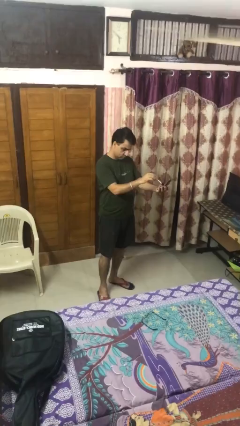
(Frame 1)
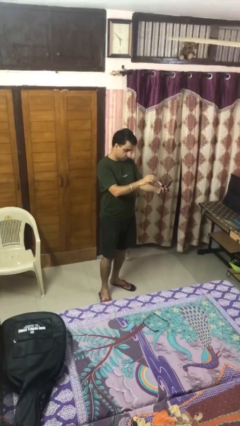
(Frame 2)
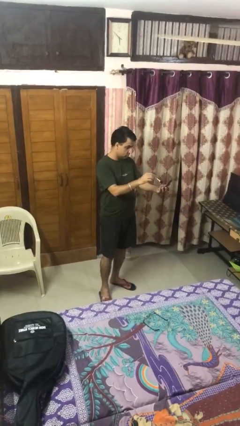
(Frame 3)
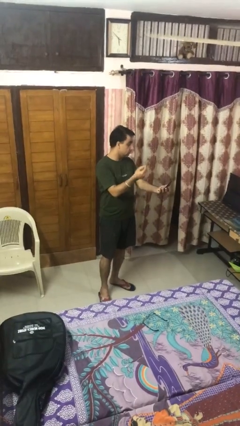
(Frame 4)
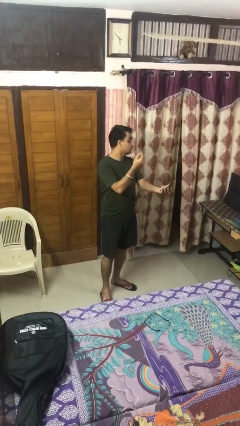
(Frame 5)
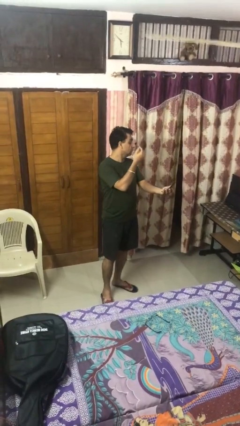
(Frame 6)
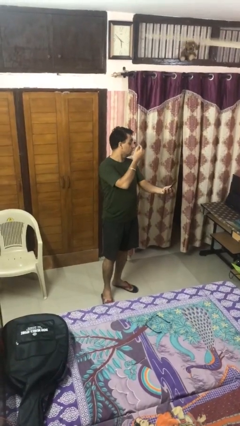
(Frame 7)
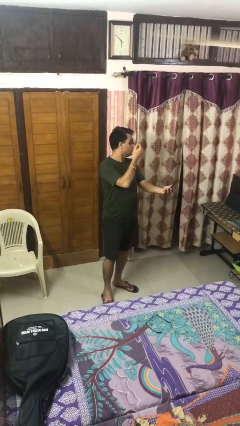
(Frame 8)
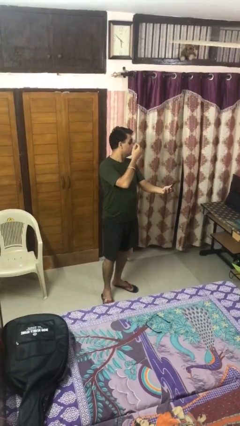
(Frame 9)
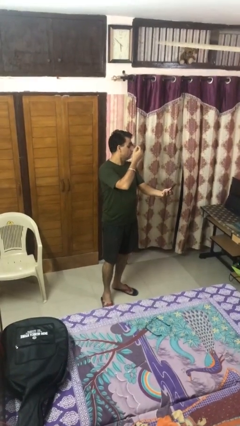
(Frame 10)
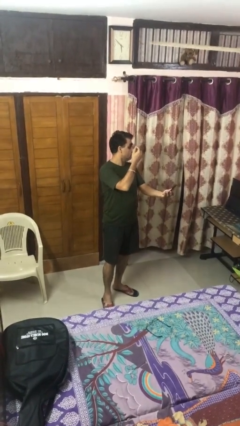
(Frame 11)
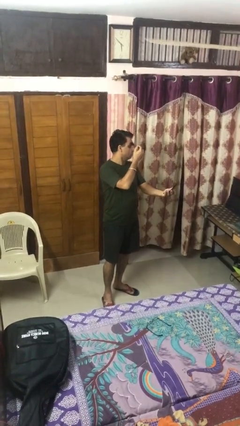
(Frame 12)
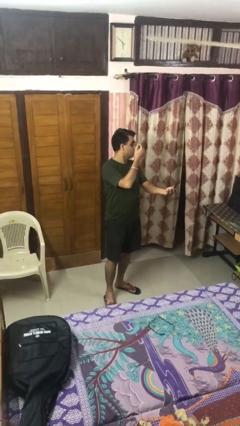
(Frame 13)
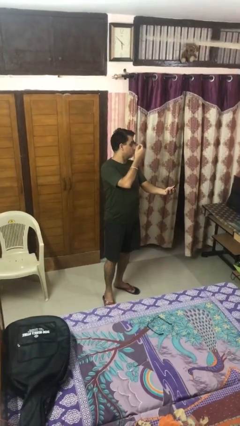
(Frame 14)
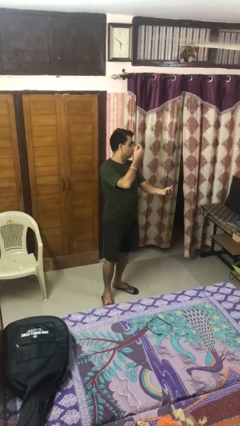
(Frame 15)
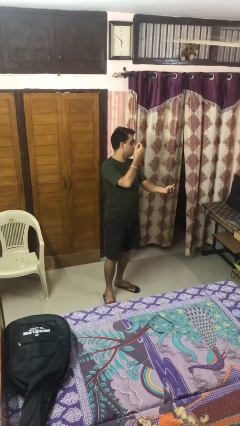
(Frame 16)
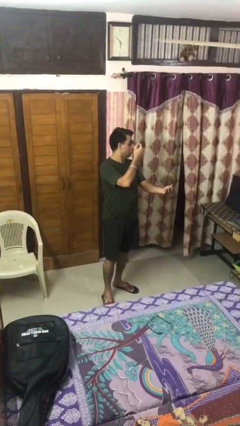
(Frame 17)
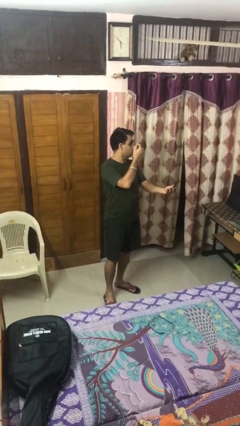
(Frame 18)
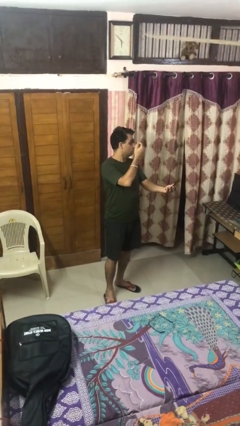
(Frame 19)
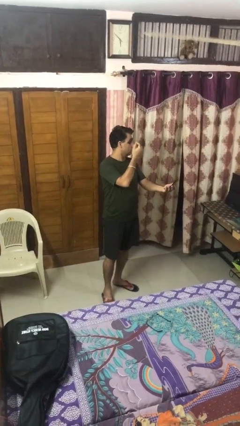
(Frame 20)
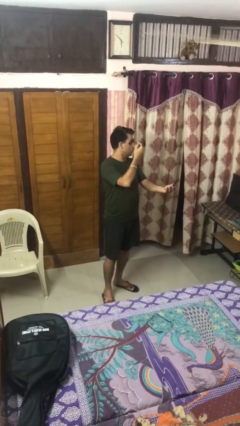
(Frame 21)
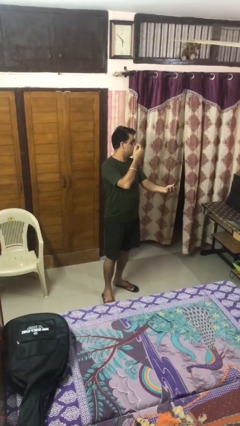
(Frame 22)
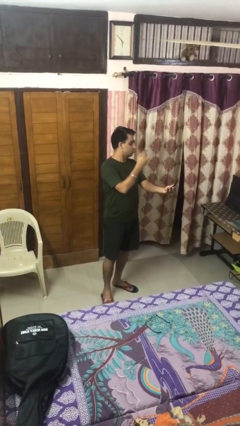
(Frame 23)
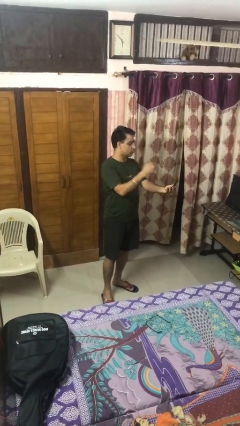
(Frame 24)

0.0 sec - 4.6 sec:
person applies eye makeup

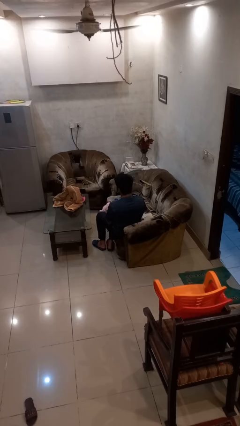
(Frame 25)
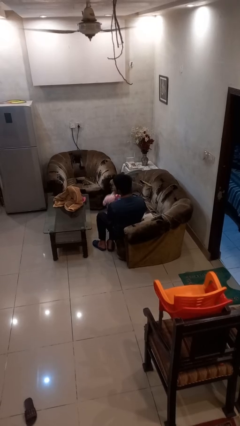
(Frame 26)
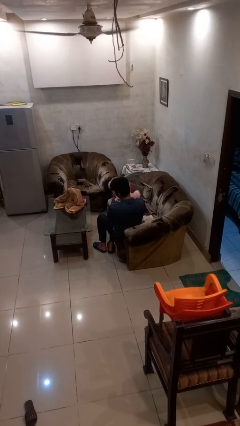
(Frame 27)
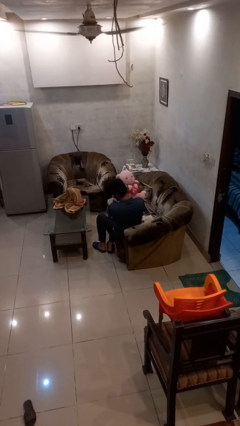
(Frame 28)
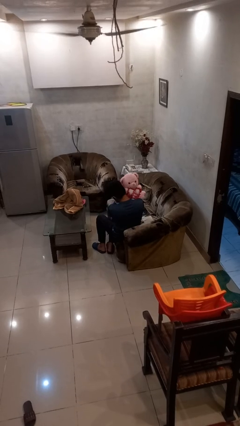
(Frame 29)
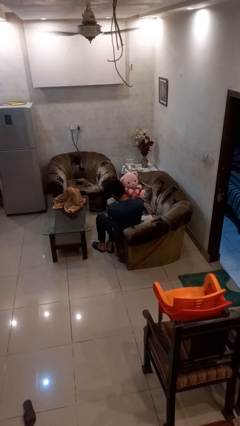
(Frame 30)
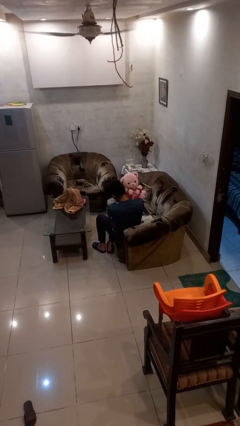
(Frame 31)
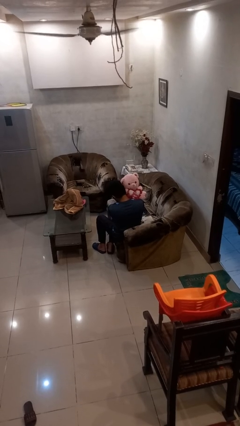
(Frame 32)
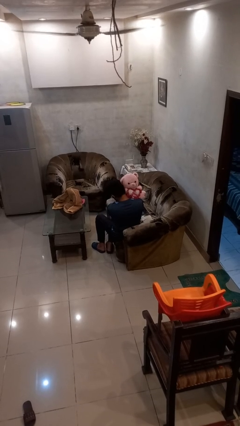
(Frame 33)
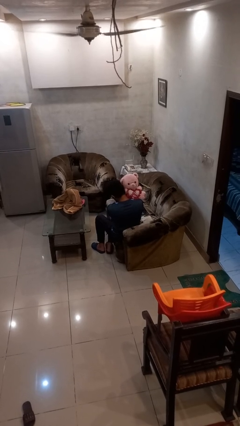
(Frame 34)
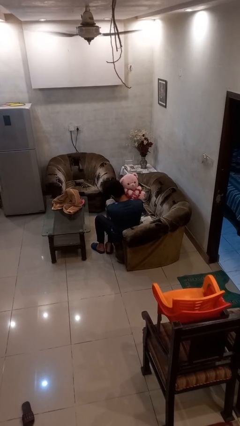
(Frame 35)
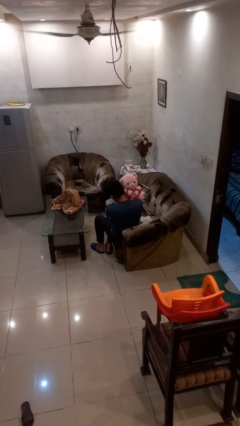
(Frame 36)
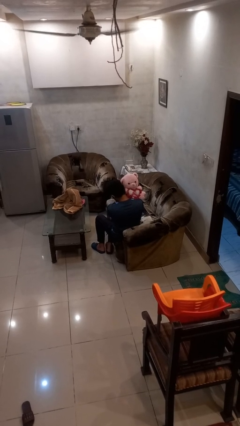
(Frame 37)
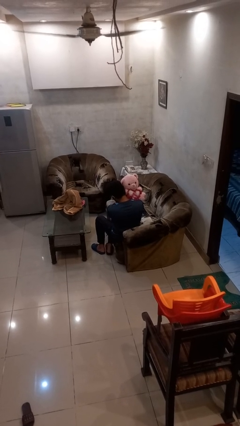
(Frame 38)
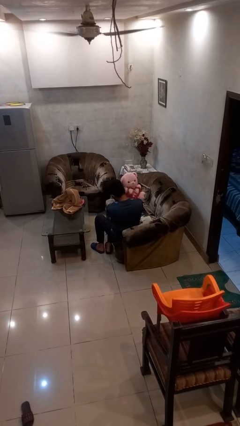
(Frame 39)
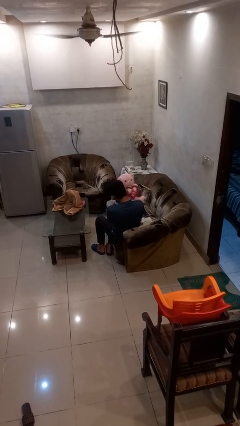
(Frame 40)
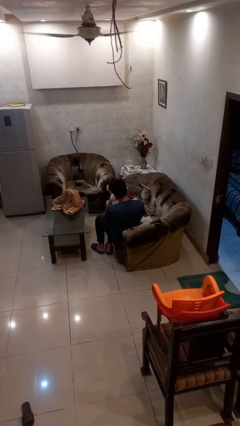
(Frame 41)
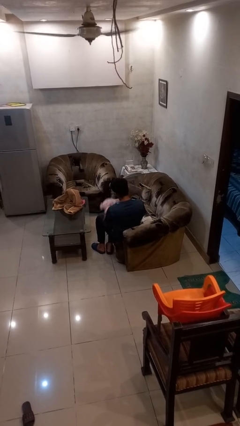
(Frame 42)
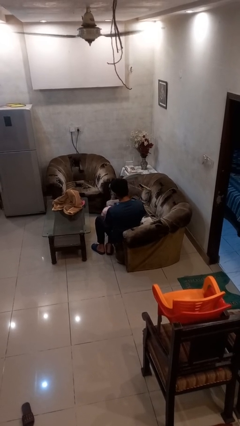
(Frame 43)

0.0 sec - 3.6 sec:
person hugs stuffed animal

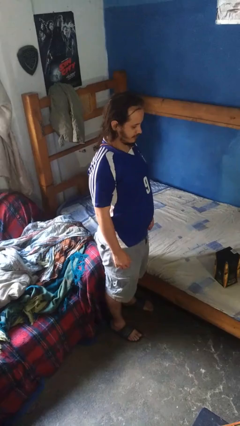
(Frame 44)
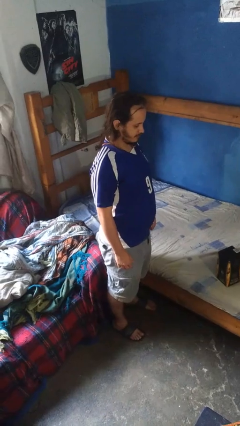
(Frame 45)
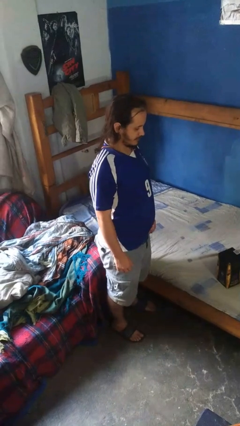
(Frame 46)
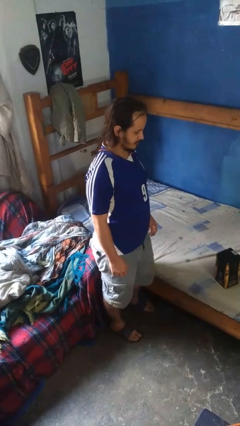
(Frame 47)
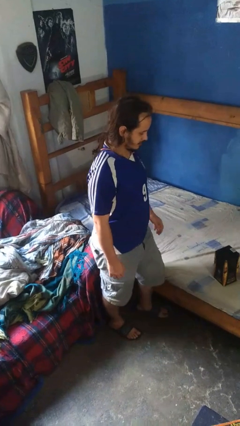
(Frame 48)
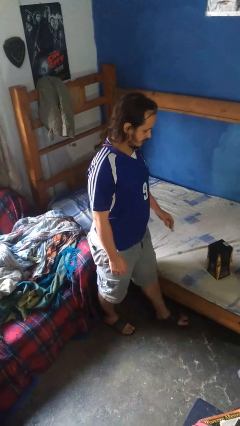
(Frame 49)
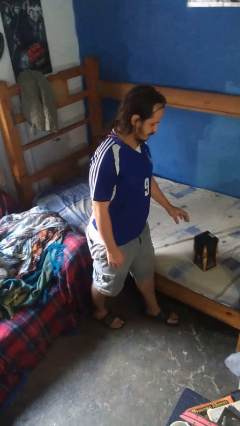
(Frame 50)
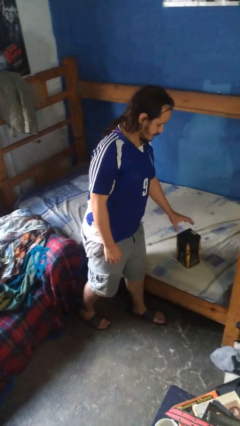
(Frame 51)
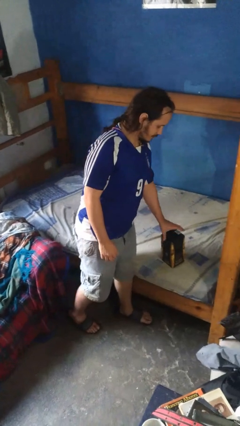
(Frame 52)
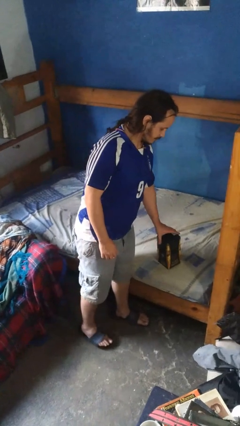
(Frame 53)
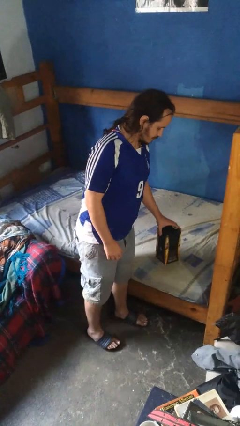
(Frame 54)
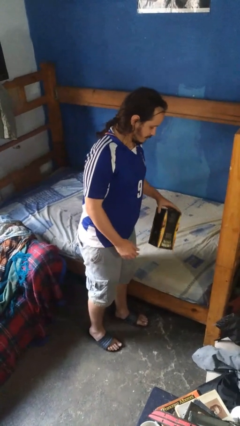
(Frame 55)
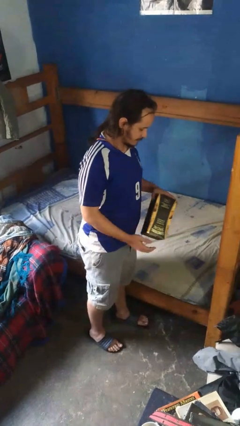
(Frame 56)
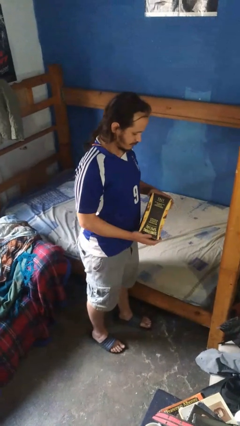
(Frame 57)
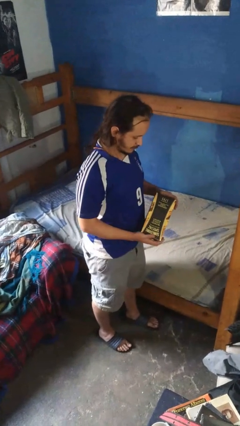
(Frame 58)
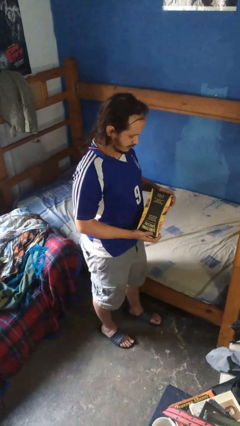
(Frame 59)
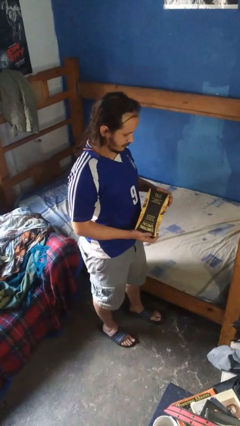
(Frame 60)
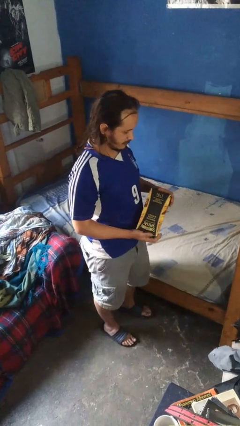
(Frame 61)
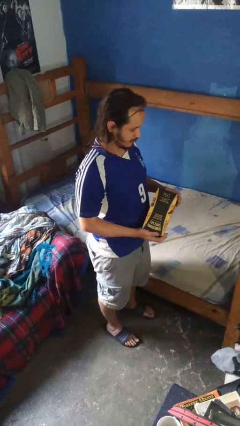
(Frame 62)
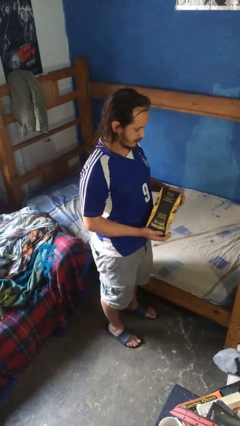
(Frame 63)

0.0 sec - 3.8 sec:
person picks up object from bed

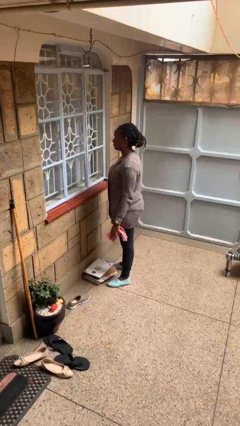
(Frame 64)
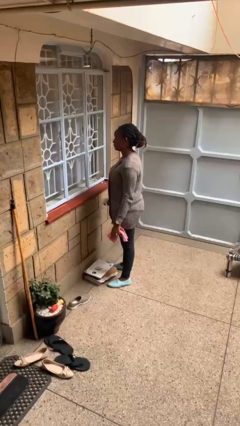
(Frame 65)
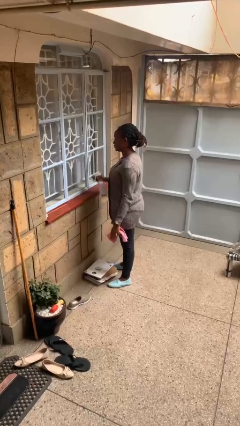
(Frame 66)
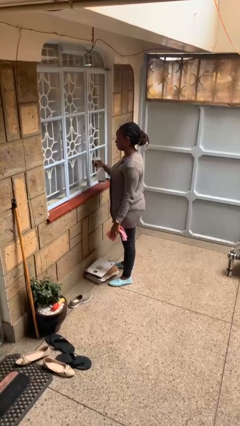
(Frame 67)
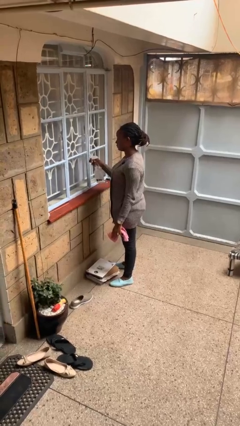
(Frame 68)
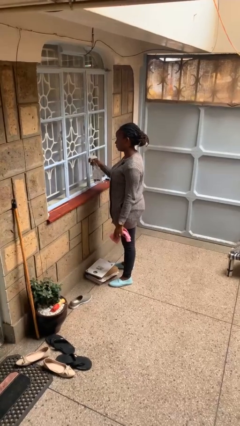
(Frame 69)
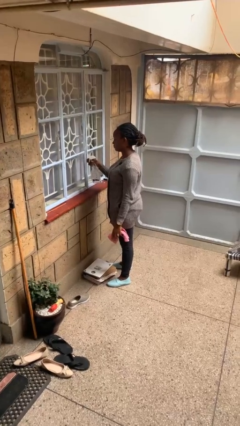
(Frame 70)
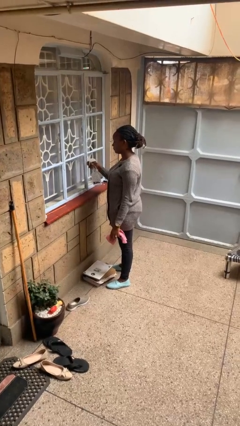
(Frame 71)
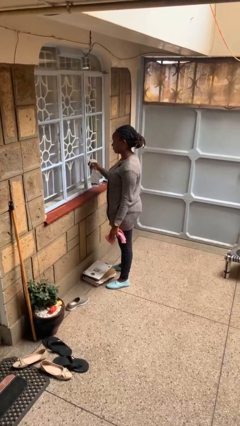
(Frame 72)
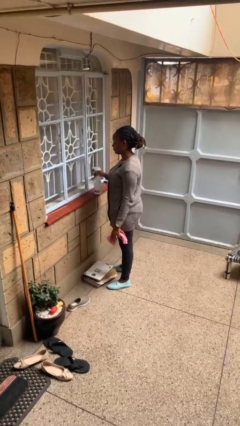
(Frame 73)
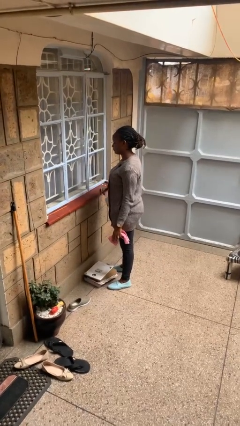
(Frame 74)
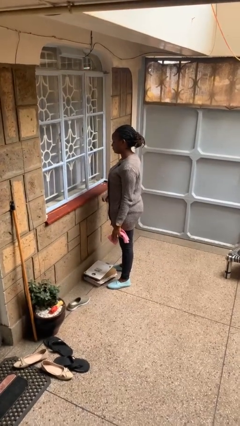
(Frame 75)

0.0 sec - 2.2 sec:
person sprays from bottle

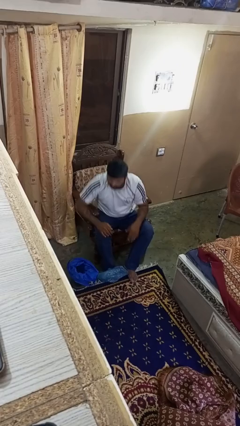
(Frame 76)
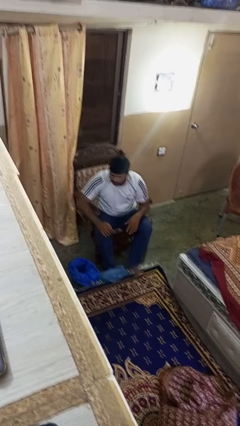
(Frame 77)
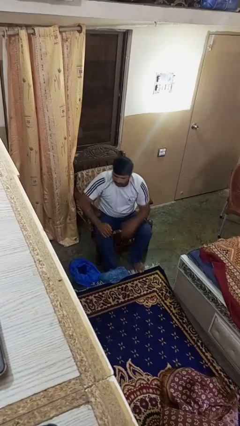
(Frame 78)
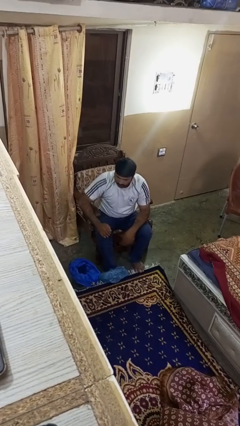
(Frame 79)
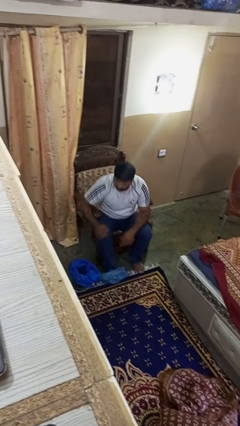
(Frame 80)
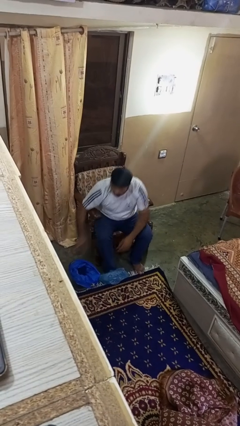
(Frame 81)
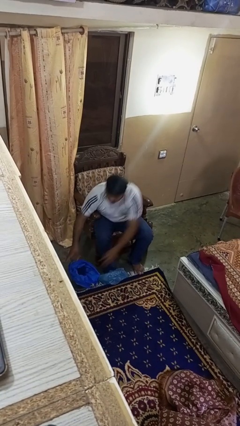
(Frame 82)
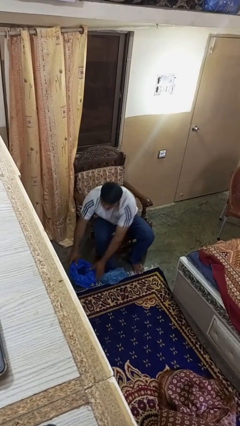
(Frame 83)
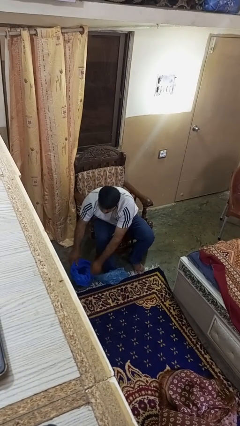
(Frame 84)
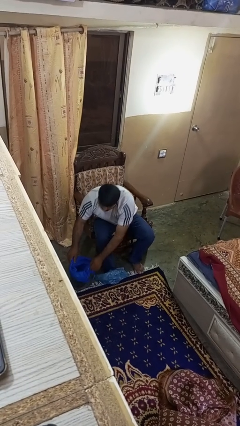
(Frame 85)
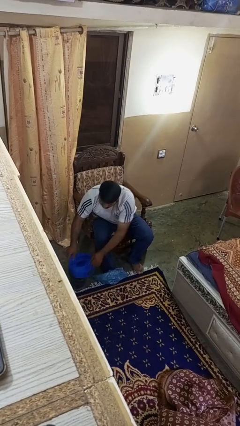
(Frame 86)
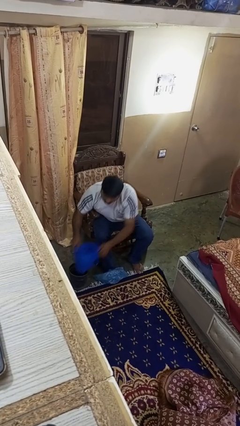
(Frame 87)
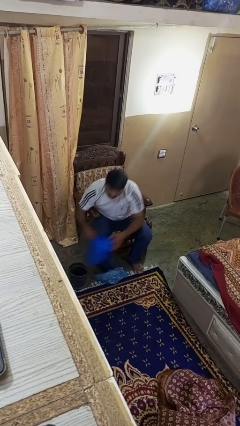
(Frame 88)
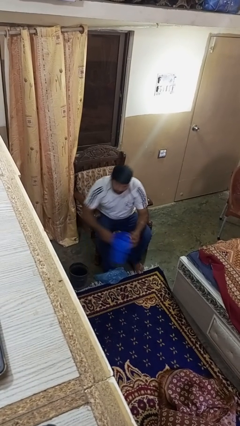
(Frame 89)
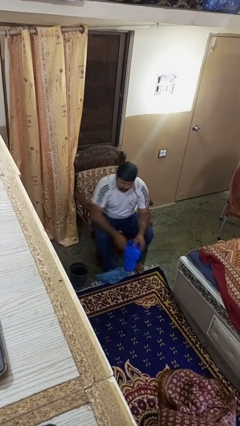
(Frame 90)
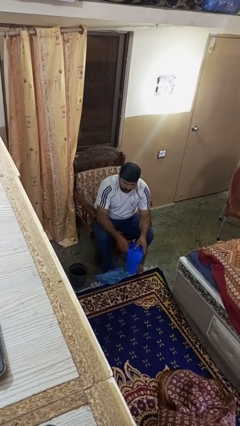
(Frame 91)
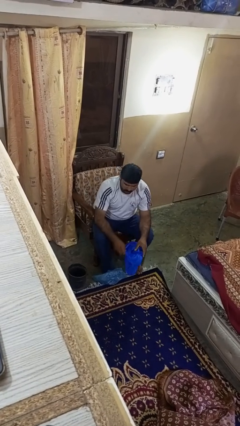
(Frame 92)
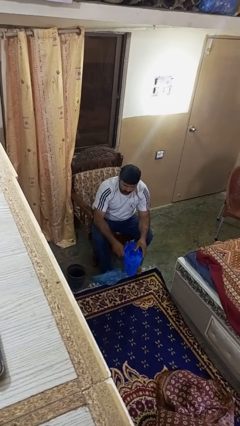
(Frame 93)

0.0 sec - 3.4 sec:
person removes trashbag from trashcan
